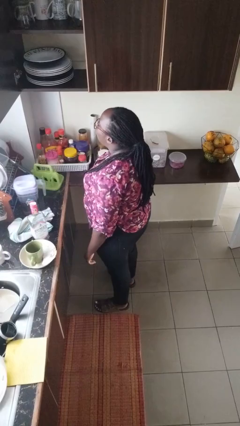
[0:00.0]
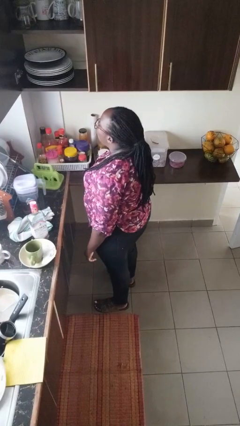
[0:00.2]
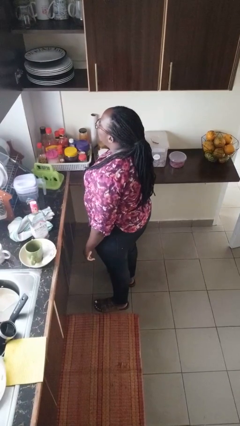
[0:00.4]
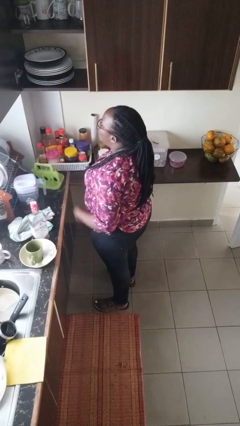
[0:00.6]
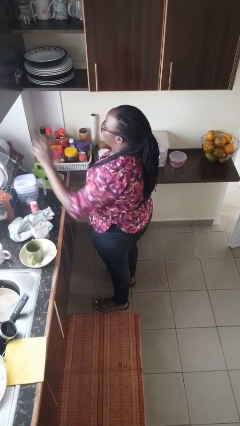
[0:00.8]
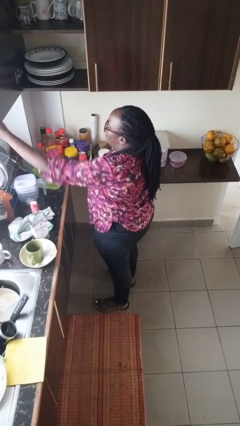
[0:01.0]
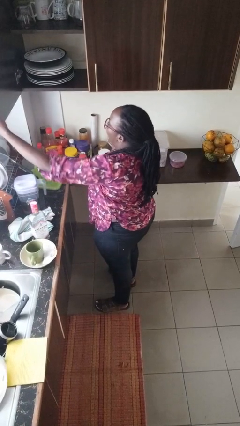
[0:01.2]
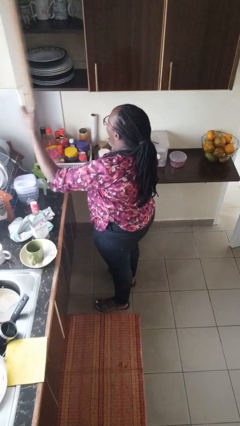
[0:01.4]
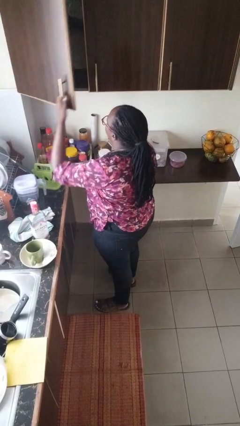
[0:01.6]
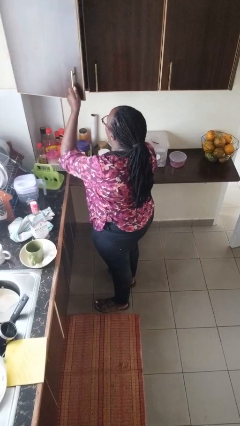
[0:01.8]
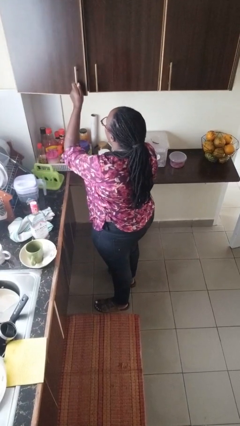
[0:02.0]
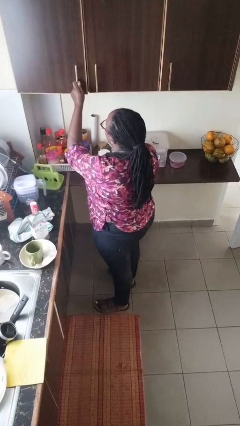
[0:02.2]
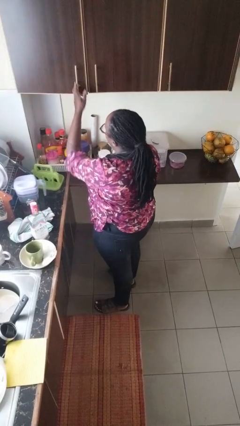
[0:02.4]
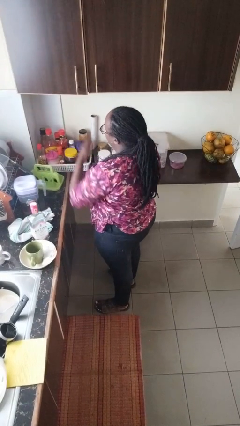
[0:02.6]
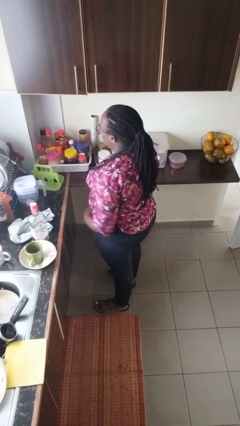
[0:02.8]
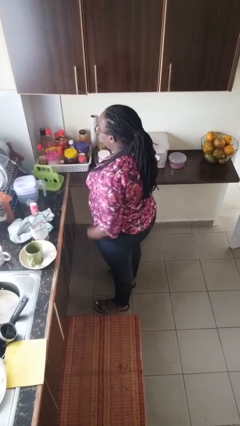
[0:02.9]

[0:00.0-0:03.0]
person closes cabinet

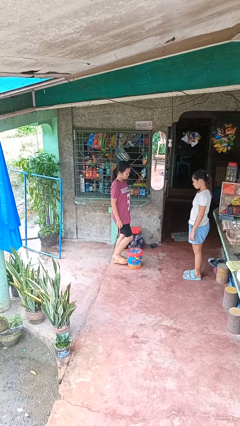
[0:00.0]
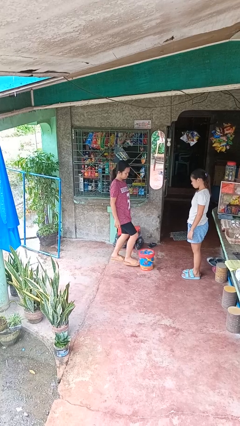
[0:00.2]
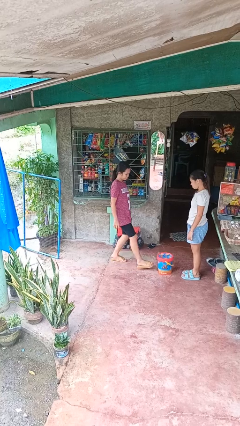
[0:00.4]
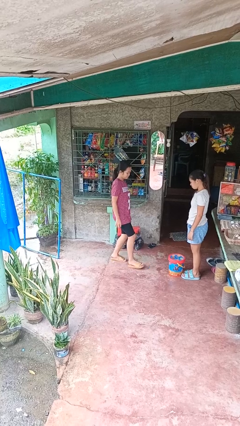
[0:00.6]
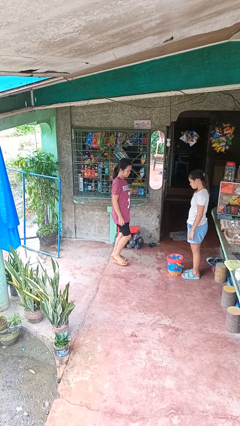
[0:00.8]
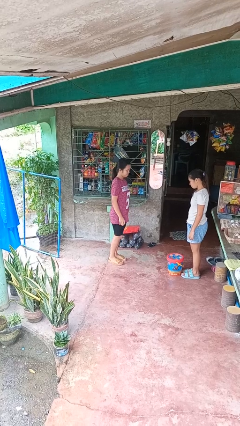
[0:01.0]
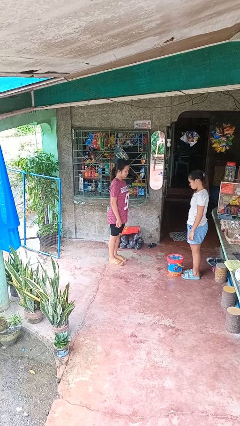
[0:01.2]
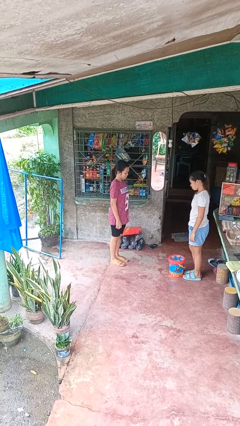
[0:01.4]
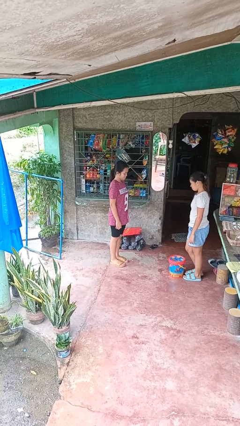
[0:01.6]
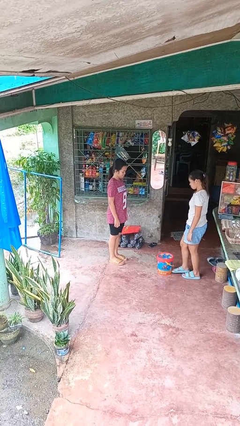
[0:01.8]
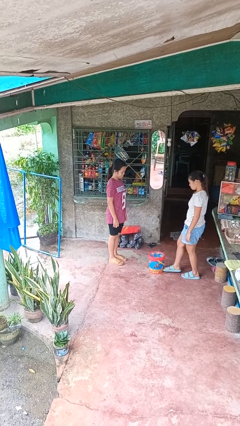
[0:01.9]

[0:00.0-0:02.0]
person kicks object to person

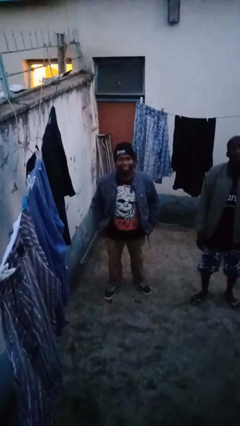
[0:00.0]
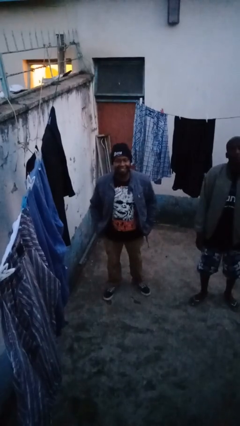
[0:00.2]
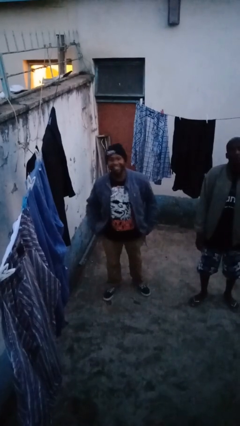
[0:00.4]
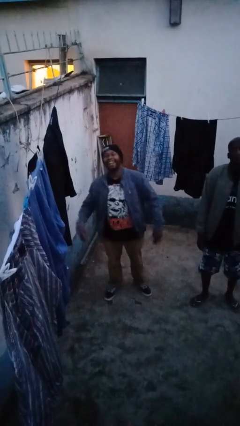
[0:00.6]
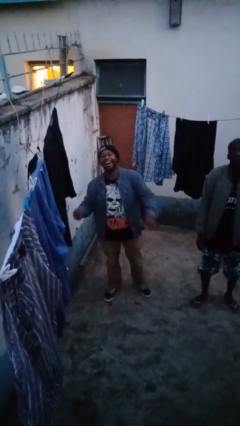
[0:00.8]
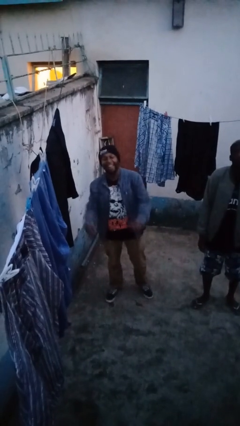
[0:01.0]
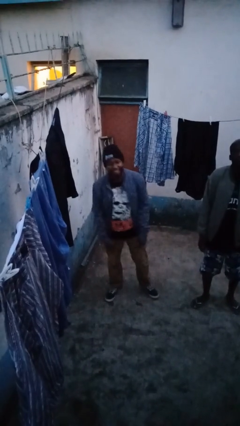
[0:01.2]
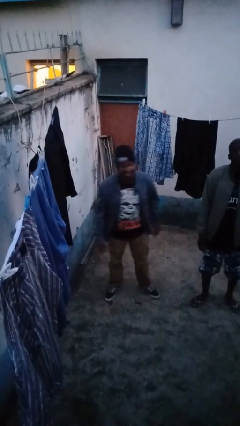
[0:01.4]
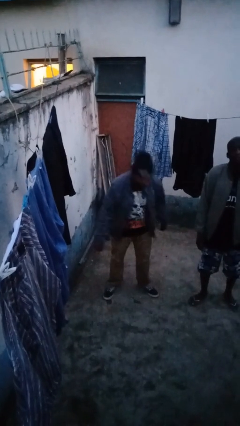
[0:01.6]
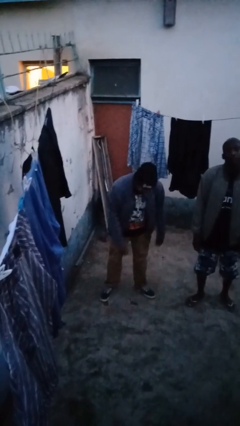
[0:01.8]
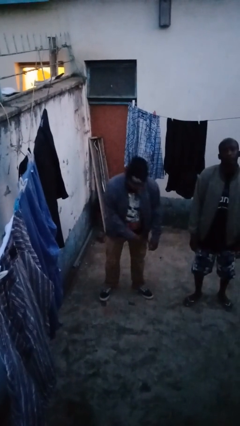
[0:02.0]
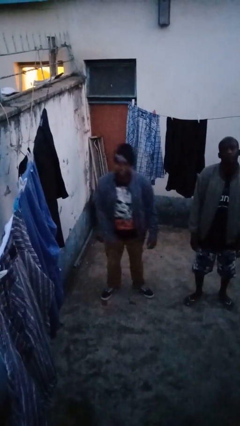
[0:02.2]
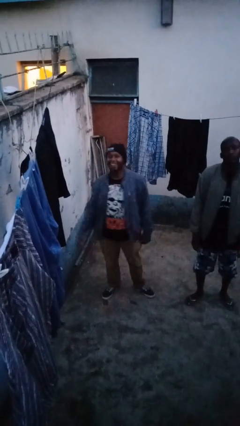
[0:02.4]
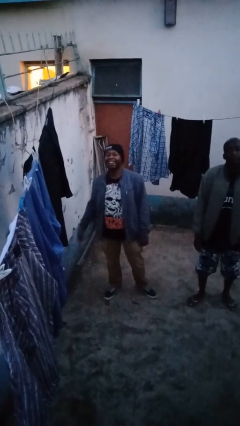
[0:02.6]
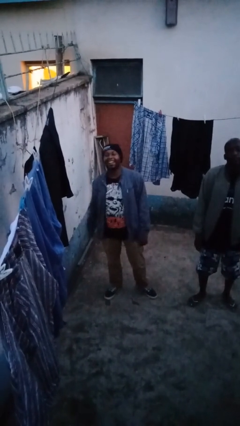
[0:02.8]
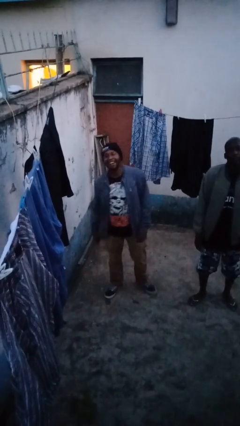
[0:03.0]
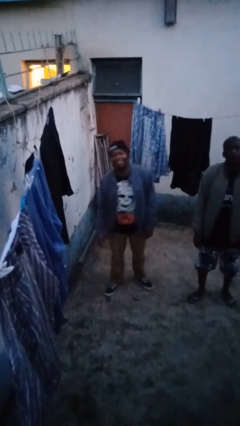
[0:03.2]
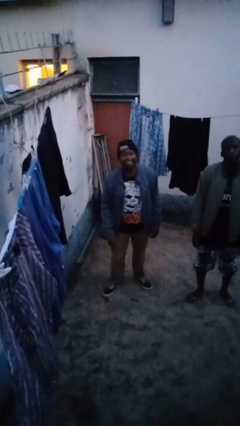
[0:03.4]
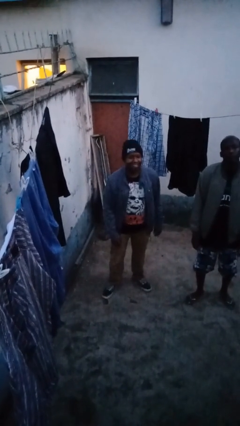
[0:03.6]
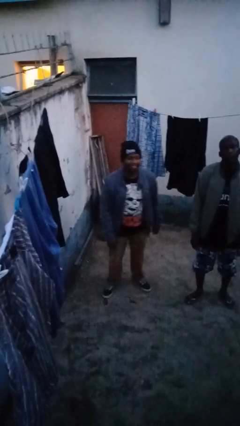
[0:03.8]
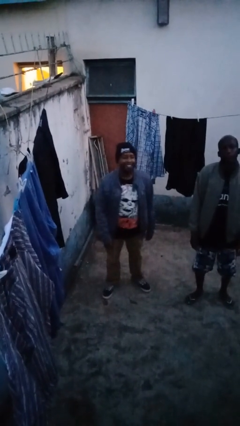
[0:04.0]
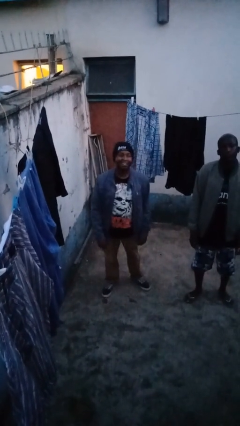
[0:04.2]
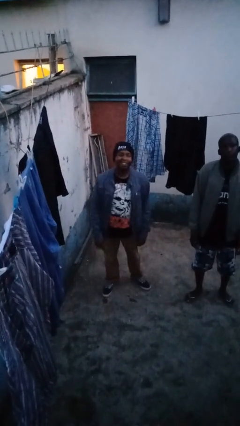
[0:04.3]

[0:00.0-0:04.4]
person laughs with person

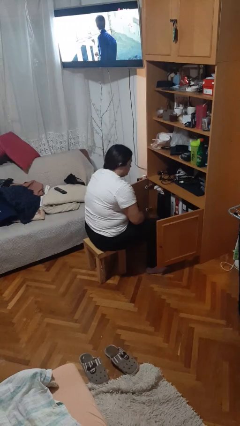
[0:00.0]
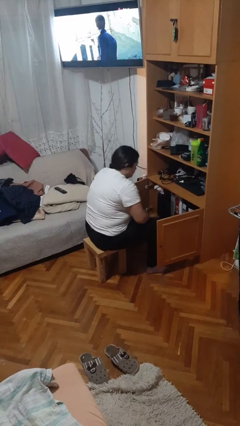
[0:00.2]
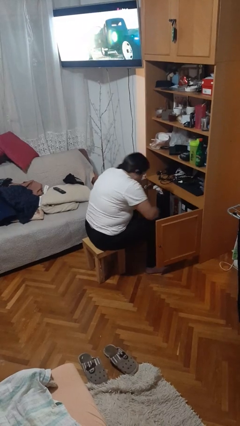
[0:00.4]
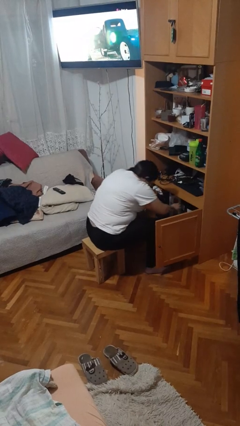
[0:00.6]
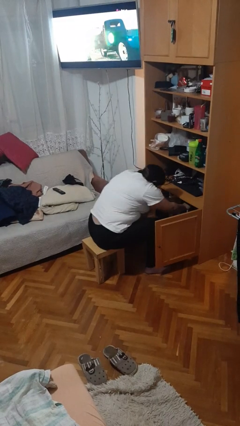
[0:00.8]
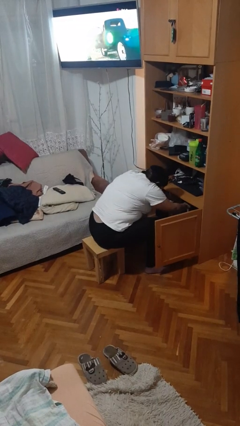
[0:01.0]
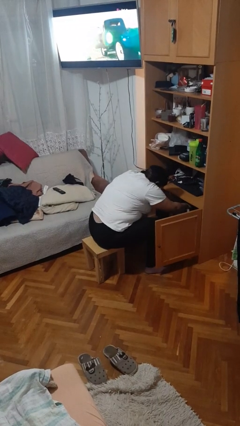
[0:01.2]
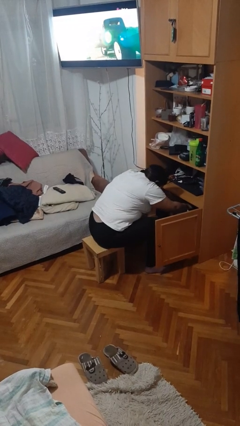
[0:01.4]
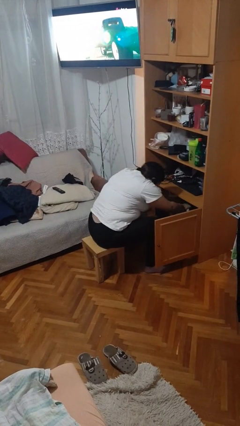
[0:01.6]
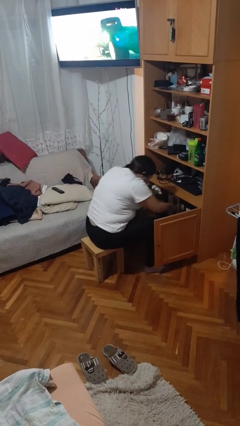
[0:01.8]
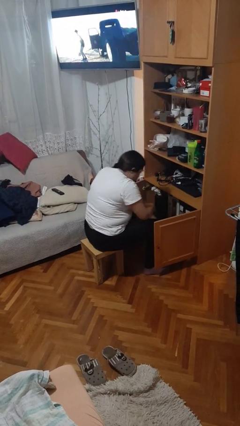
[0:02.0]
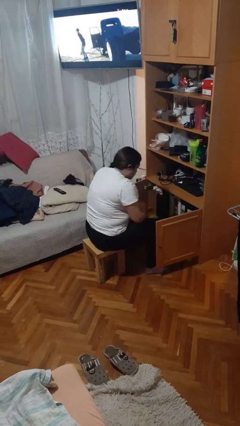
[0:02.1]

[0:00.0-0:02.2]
person searches in cabinet

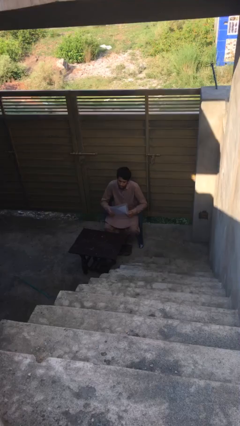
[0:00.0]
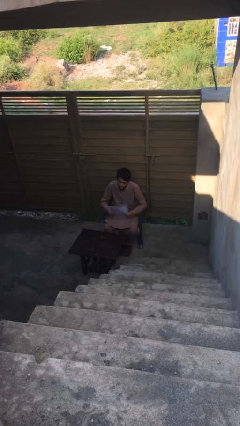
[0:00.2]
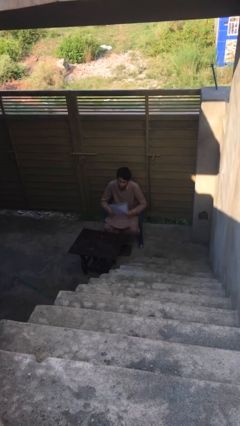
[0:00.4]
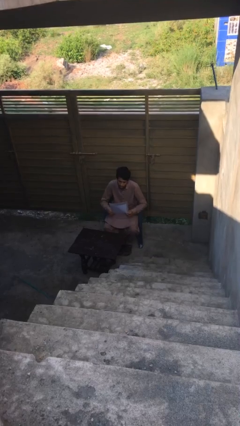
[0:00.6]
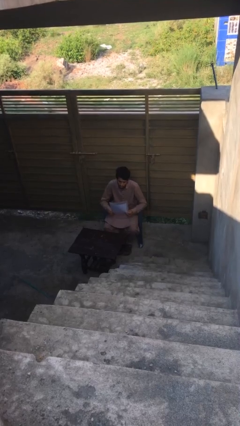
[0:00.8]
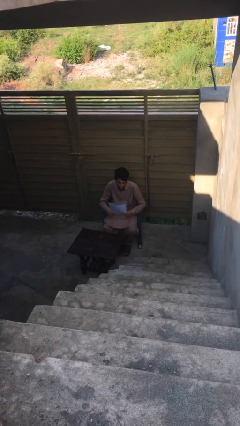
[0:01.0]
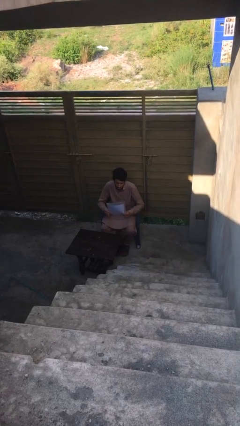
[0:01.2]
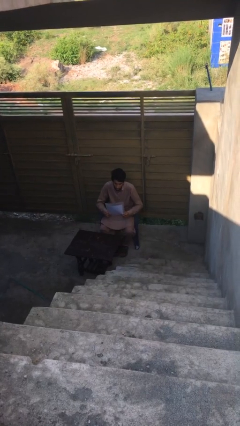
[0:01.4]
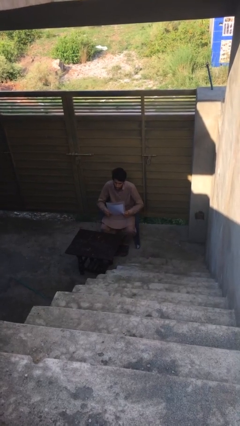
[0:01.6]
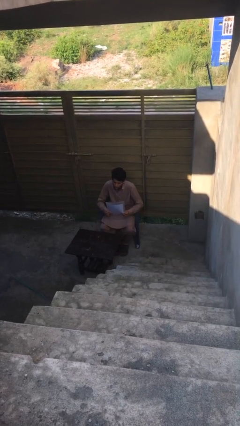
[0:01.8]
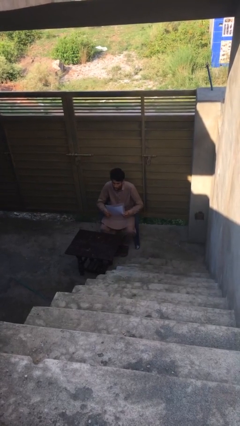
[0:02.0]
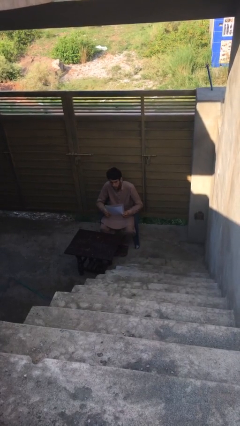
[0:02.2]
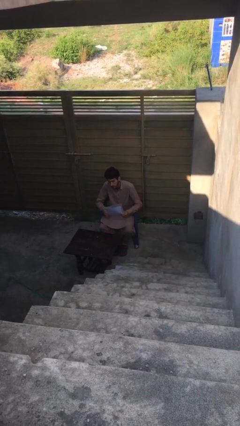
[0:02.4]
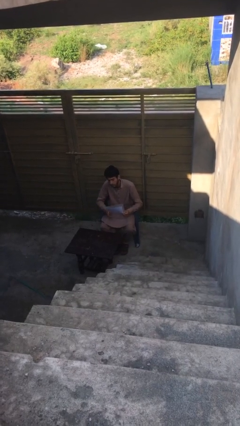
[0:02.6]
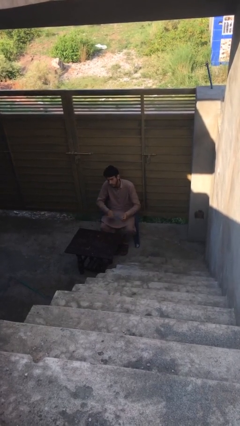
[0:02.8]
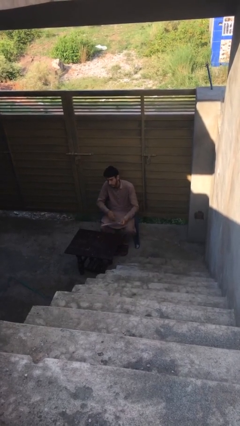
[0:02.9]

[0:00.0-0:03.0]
person reads document

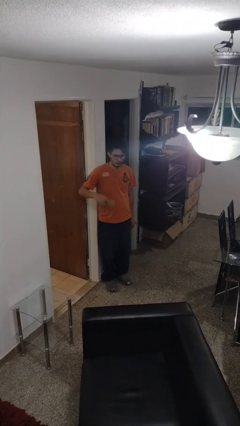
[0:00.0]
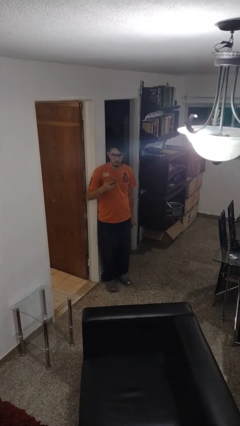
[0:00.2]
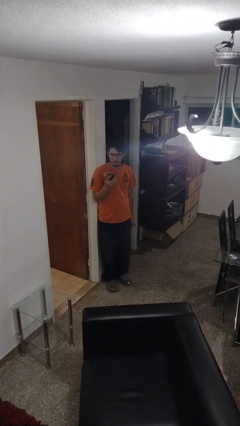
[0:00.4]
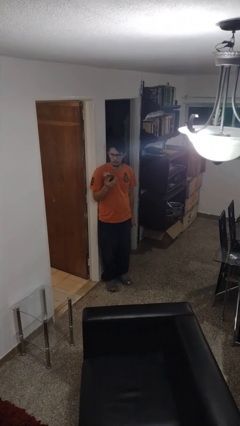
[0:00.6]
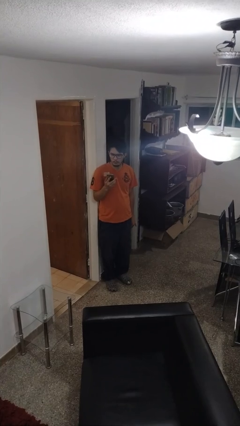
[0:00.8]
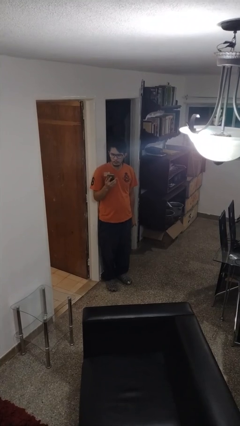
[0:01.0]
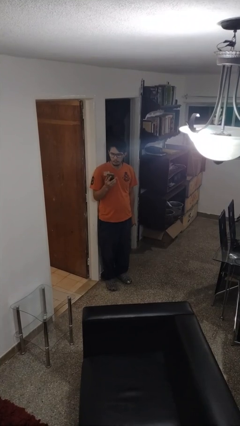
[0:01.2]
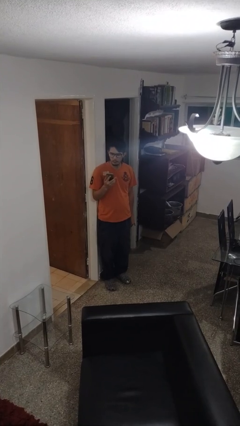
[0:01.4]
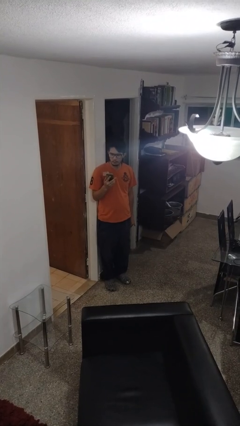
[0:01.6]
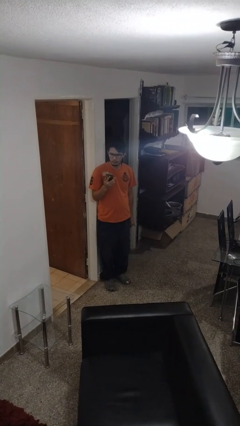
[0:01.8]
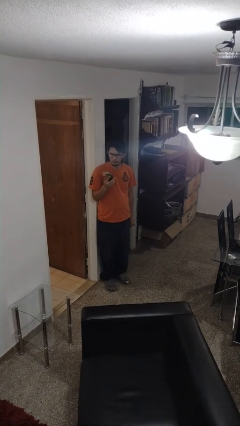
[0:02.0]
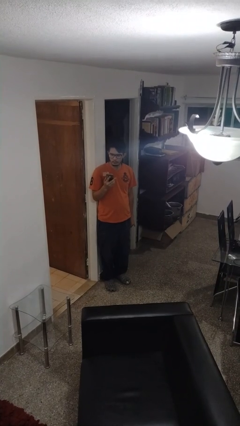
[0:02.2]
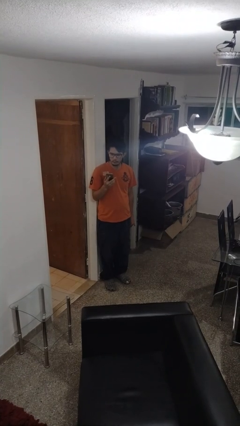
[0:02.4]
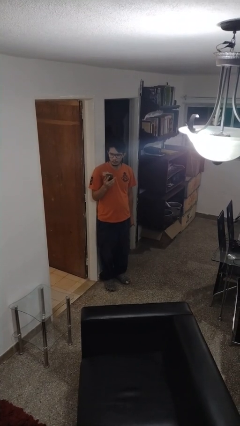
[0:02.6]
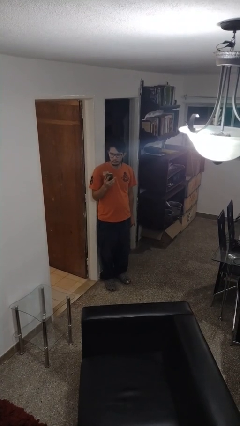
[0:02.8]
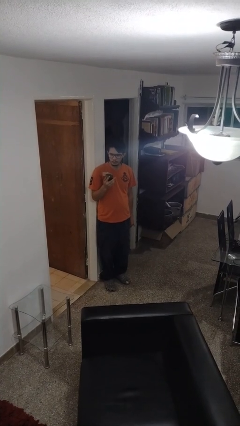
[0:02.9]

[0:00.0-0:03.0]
person takes phone from pocket
